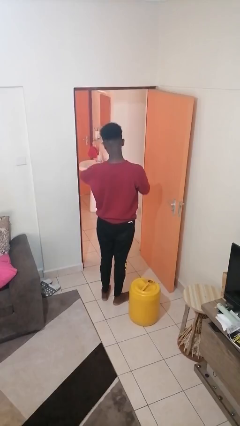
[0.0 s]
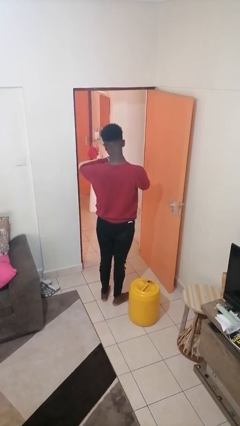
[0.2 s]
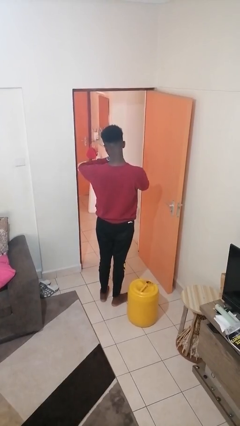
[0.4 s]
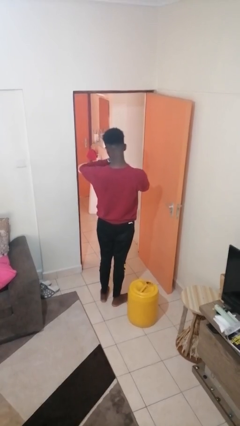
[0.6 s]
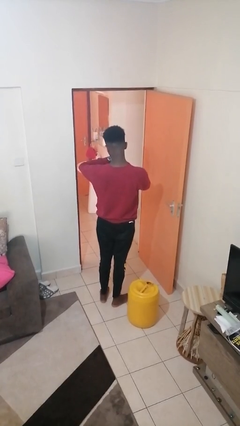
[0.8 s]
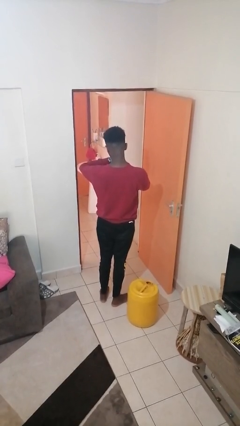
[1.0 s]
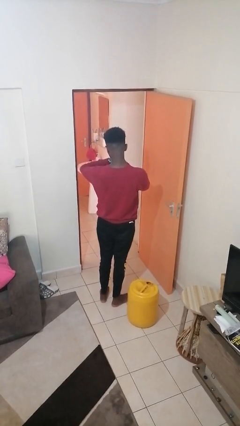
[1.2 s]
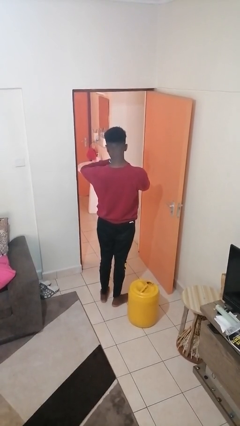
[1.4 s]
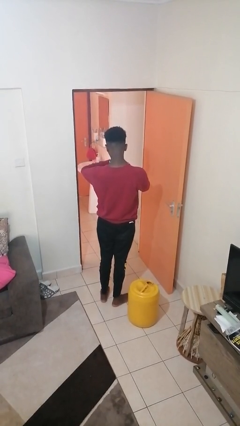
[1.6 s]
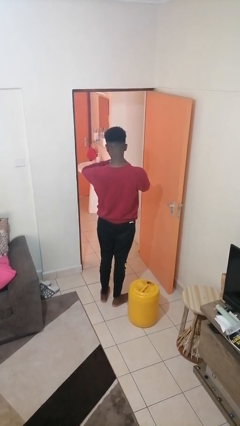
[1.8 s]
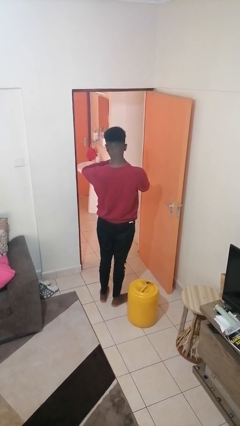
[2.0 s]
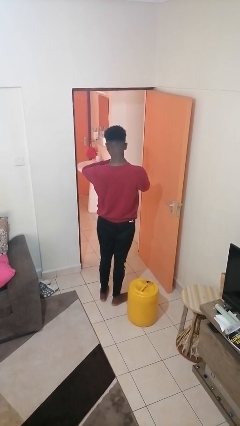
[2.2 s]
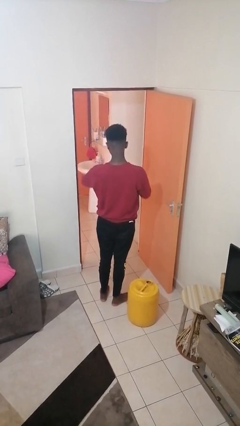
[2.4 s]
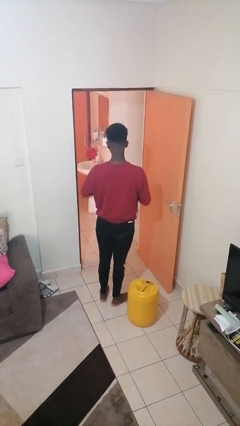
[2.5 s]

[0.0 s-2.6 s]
person looks at wristwatch

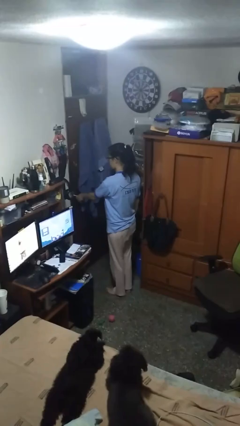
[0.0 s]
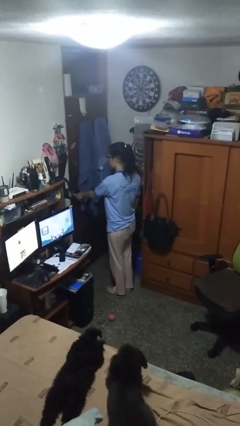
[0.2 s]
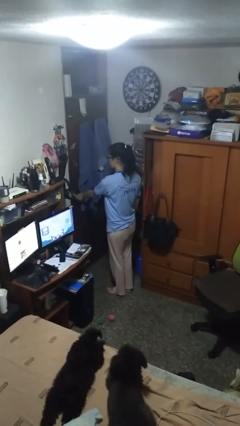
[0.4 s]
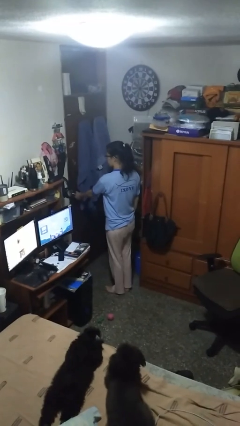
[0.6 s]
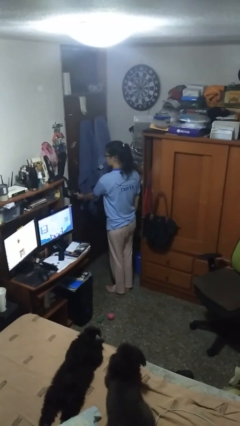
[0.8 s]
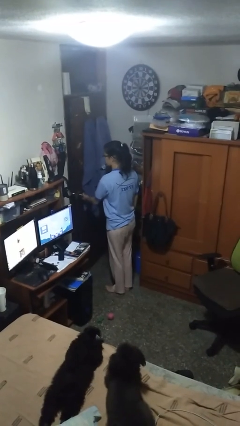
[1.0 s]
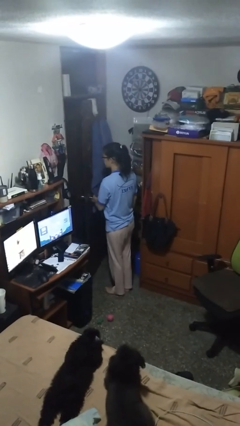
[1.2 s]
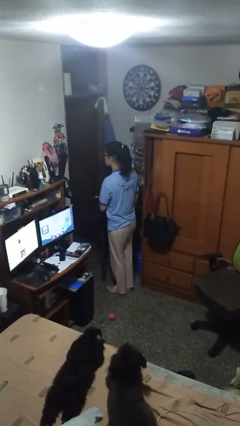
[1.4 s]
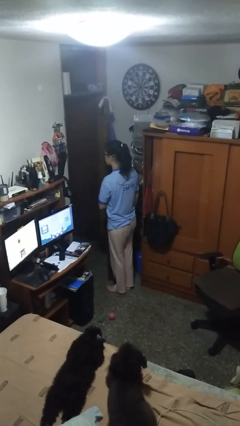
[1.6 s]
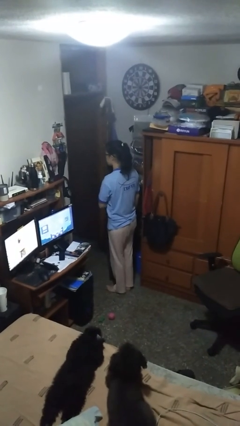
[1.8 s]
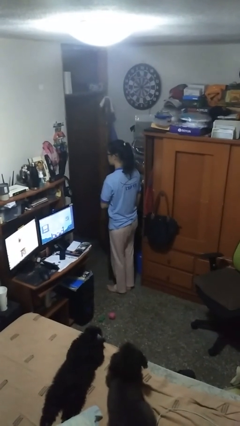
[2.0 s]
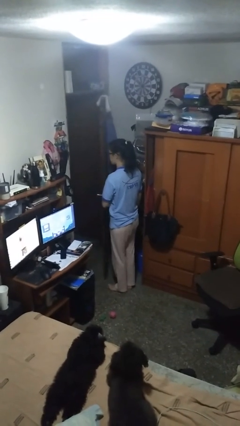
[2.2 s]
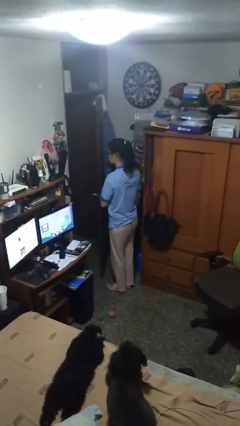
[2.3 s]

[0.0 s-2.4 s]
person opens facility door

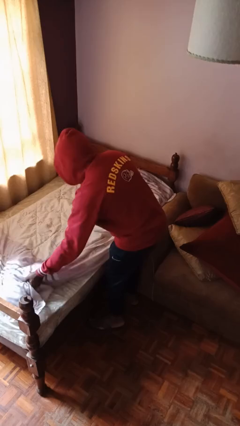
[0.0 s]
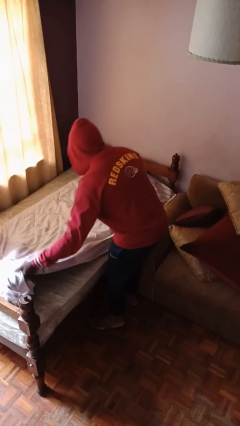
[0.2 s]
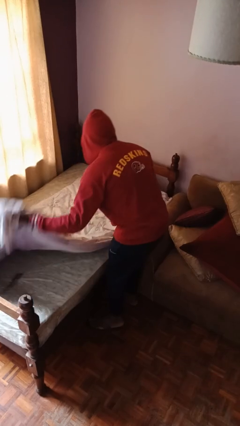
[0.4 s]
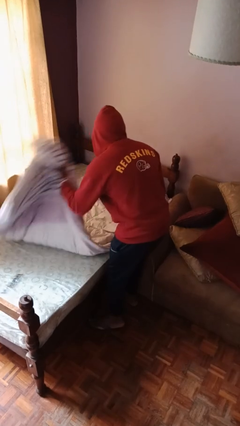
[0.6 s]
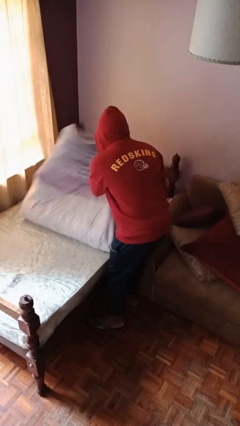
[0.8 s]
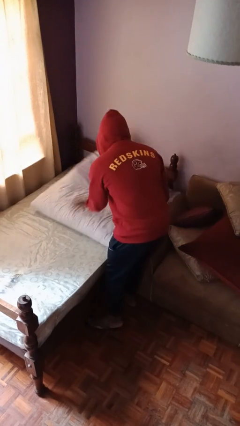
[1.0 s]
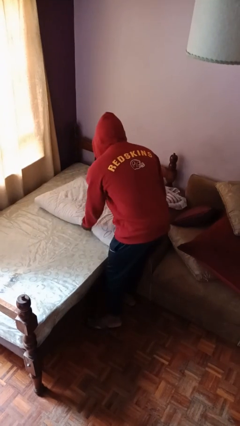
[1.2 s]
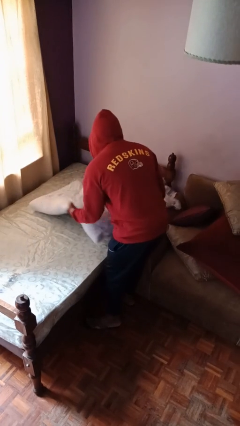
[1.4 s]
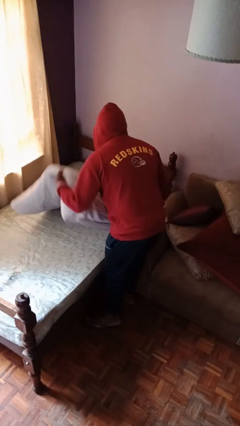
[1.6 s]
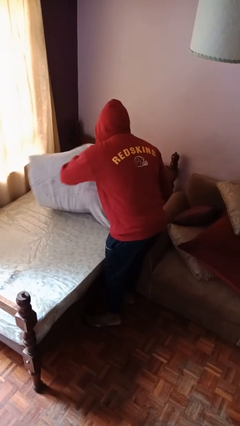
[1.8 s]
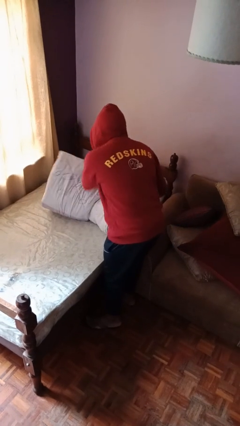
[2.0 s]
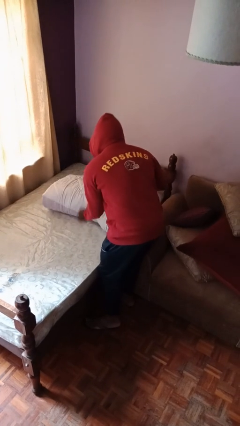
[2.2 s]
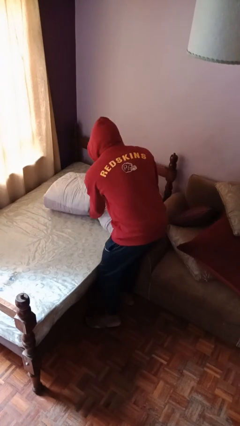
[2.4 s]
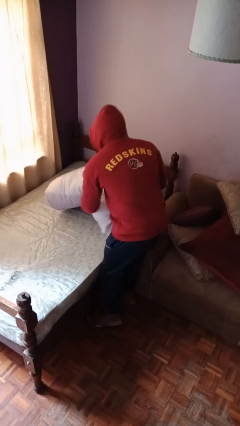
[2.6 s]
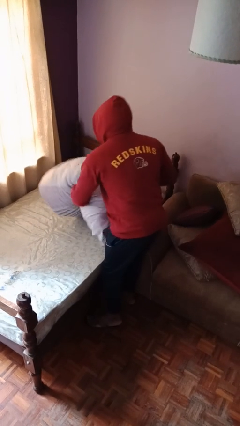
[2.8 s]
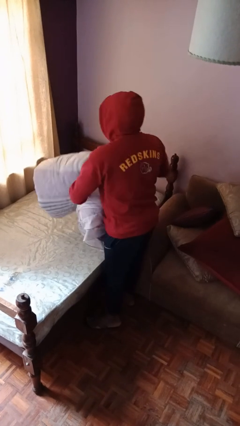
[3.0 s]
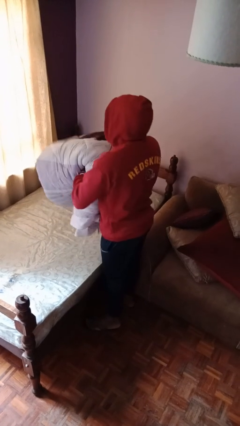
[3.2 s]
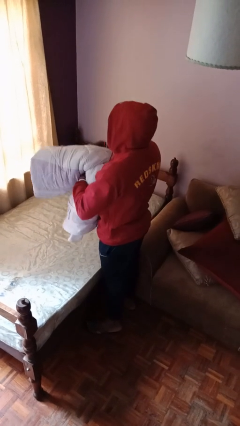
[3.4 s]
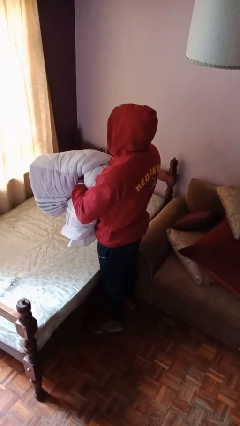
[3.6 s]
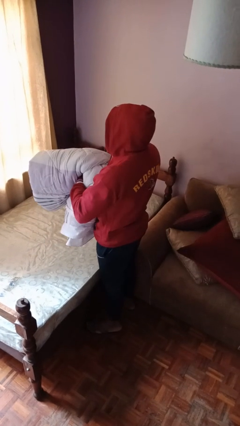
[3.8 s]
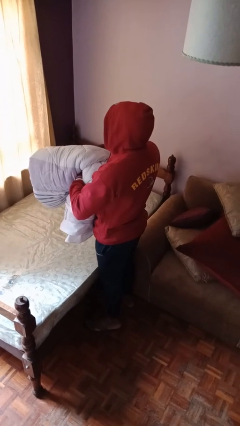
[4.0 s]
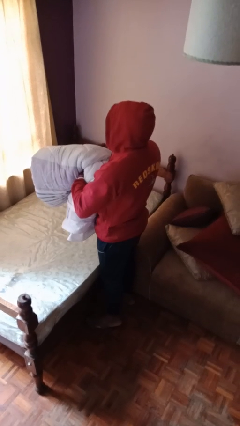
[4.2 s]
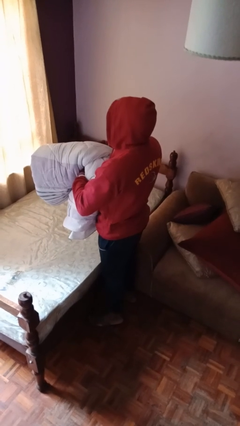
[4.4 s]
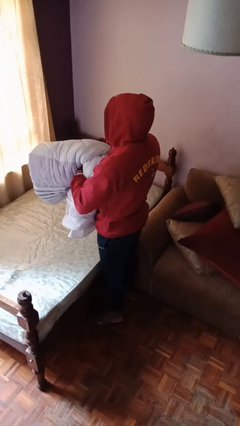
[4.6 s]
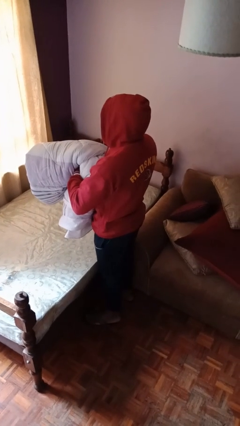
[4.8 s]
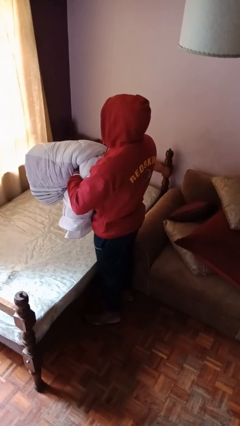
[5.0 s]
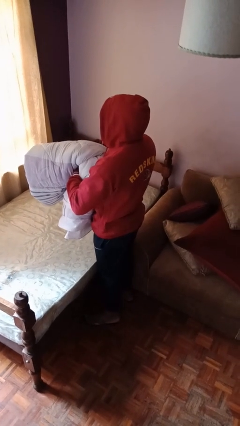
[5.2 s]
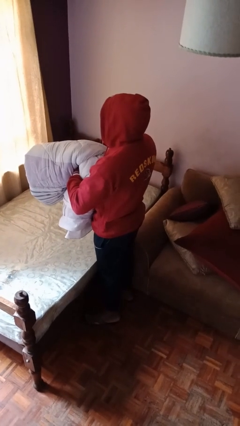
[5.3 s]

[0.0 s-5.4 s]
person folds blanket

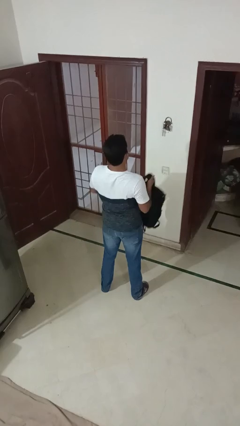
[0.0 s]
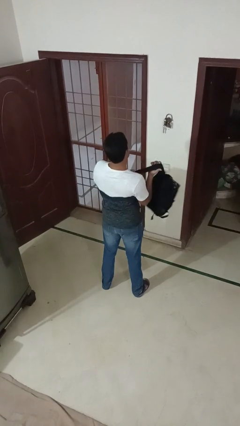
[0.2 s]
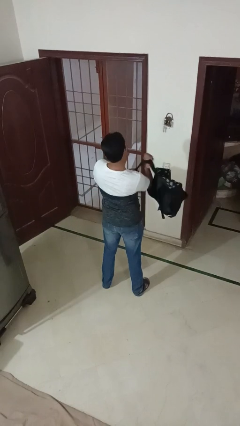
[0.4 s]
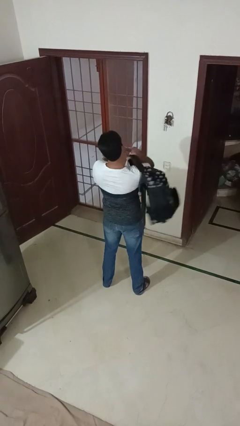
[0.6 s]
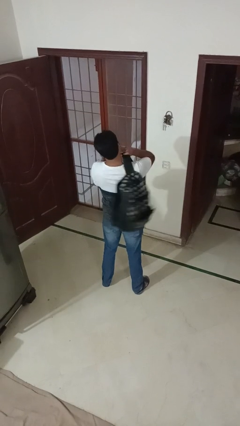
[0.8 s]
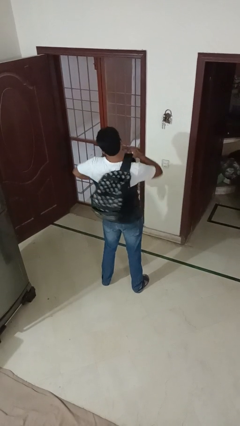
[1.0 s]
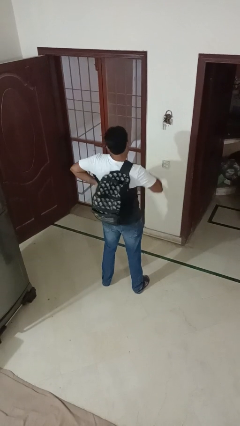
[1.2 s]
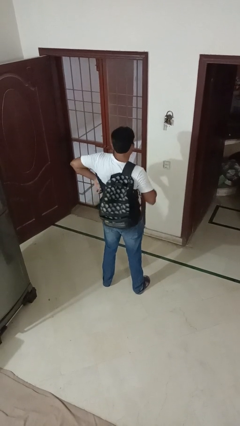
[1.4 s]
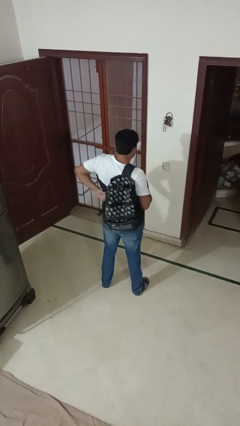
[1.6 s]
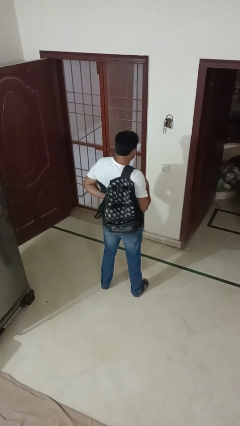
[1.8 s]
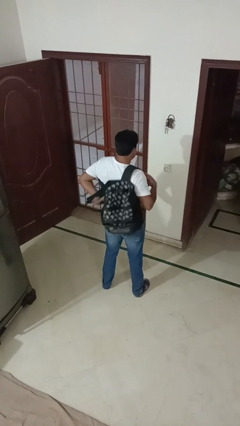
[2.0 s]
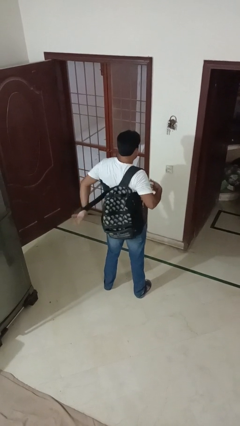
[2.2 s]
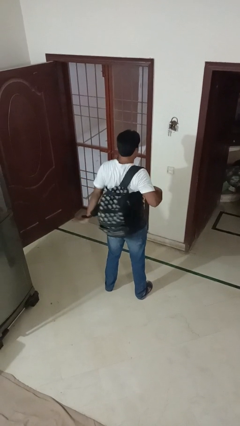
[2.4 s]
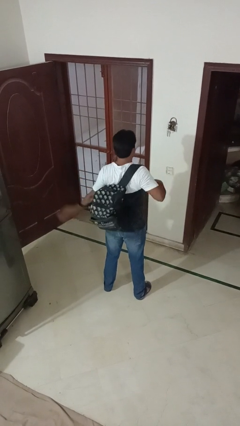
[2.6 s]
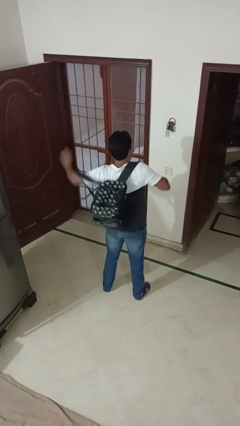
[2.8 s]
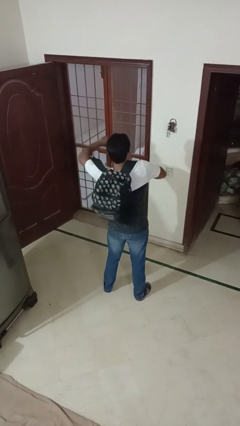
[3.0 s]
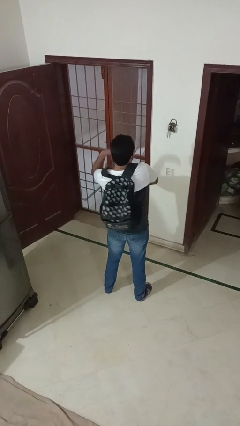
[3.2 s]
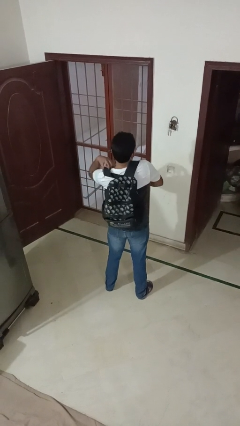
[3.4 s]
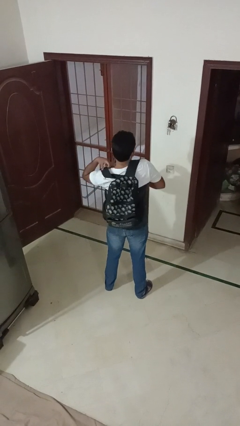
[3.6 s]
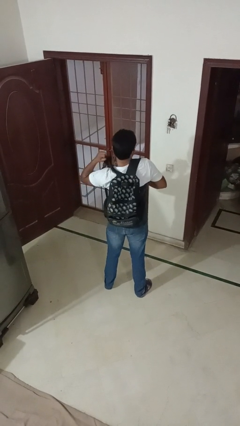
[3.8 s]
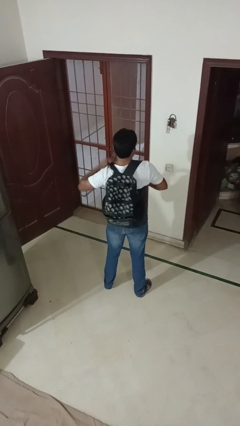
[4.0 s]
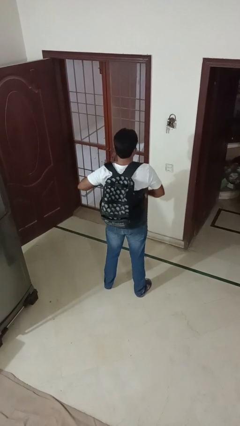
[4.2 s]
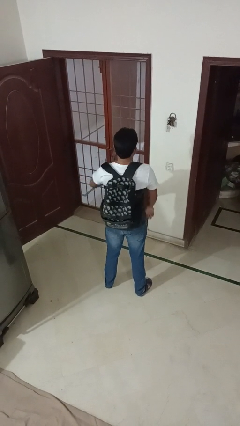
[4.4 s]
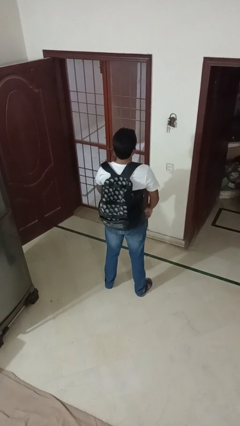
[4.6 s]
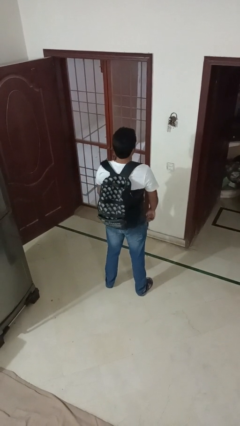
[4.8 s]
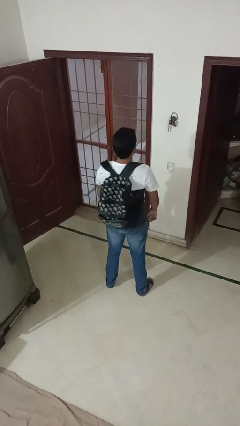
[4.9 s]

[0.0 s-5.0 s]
person puts on backpack

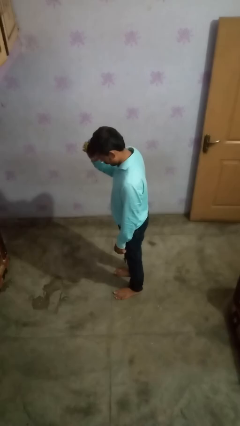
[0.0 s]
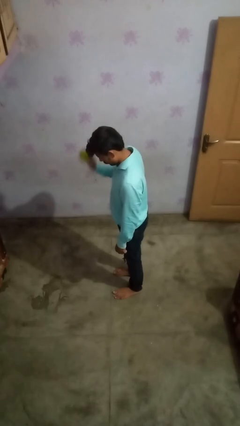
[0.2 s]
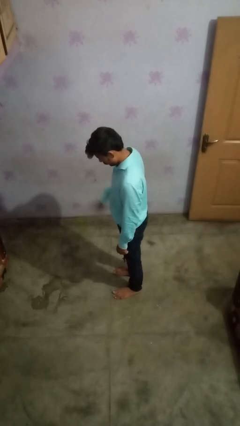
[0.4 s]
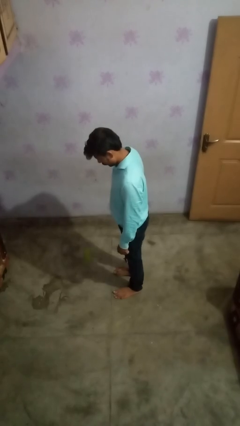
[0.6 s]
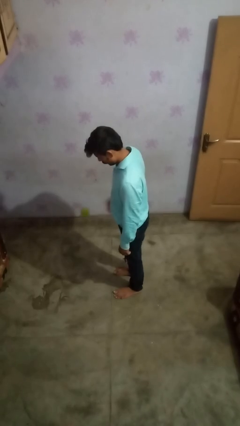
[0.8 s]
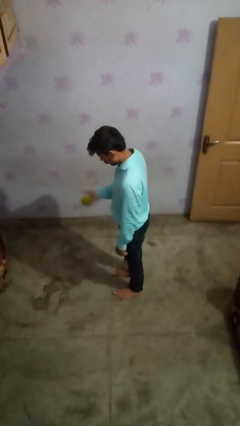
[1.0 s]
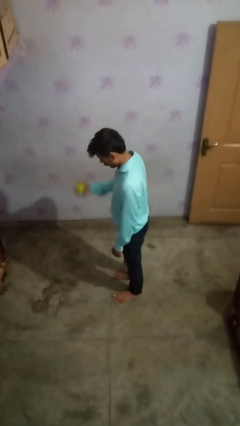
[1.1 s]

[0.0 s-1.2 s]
person bounces ball on floor

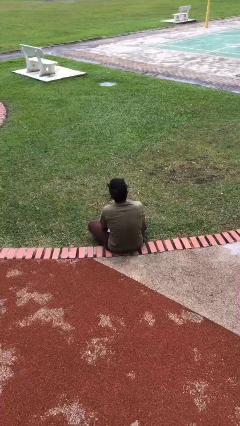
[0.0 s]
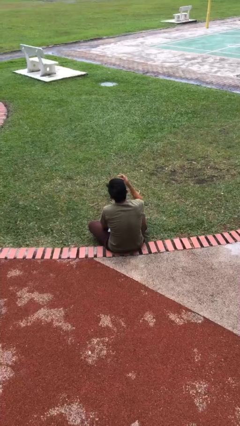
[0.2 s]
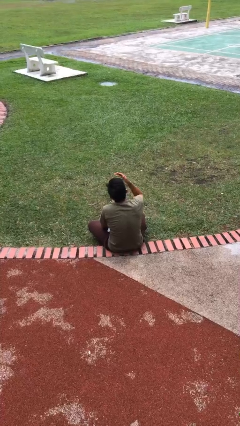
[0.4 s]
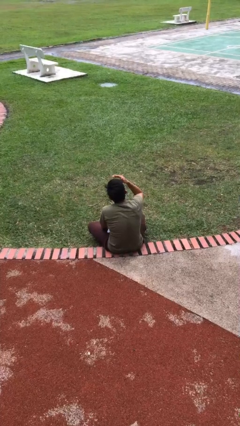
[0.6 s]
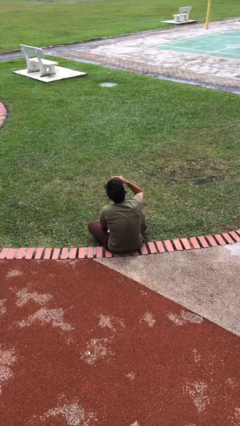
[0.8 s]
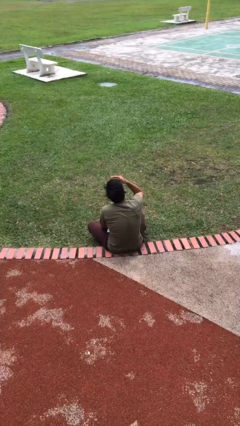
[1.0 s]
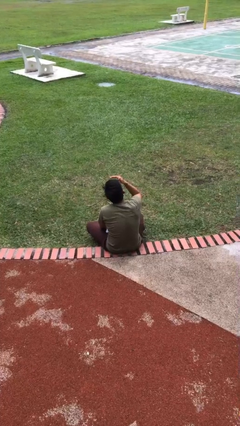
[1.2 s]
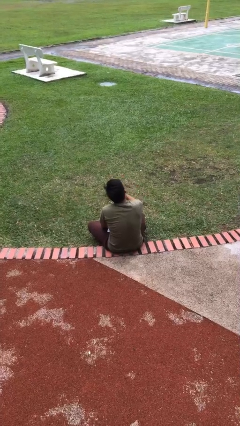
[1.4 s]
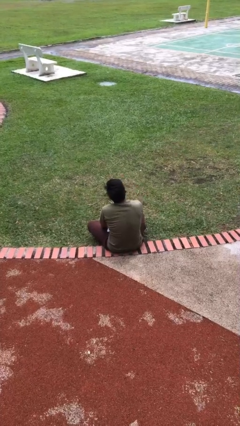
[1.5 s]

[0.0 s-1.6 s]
person shades eyes
